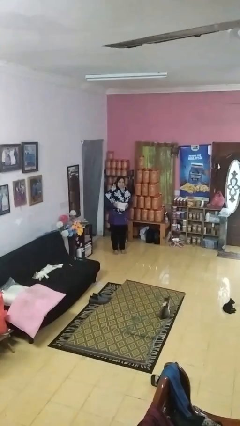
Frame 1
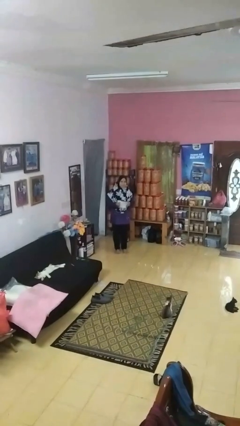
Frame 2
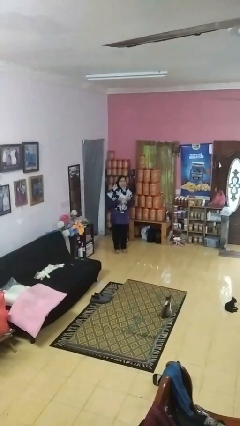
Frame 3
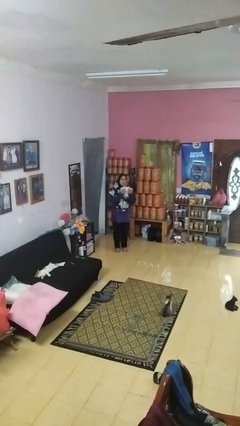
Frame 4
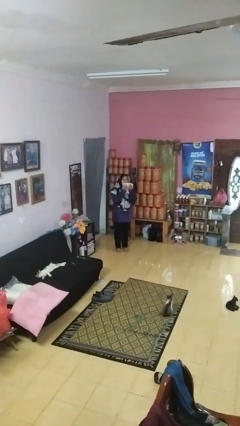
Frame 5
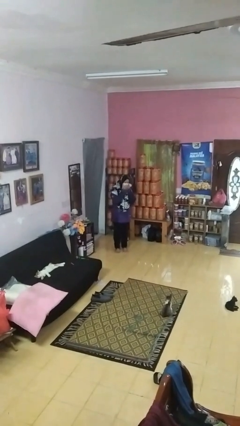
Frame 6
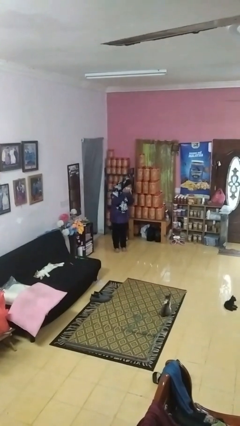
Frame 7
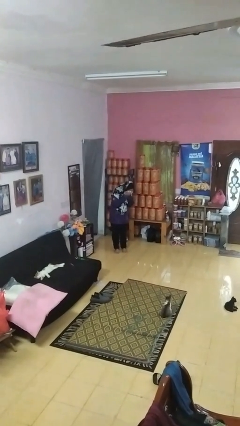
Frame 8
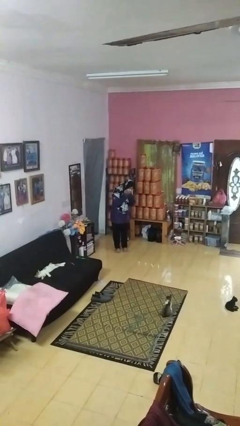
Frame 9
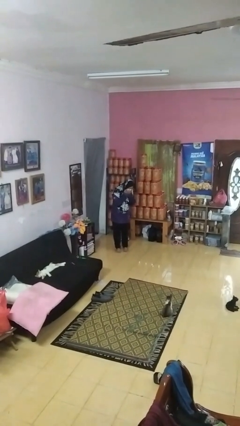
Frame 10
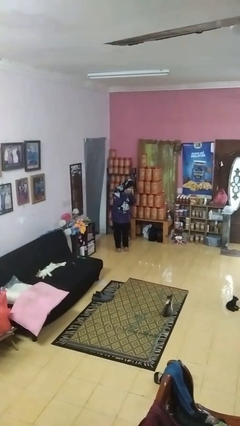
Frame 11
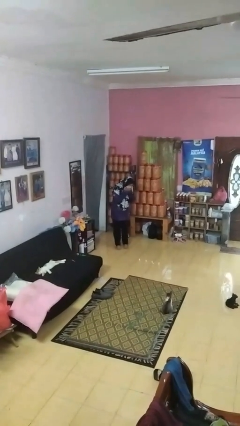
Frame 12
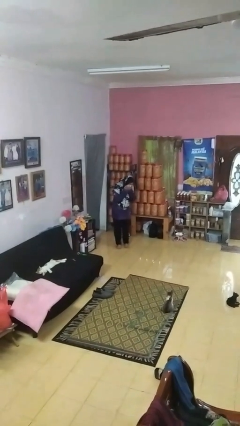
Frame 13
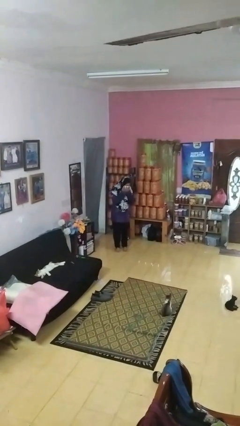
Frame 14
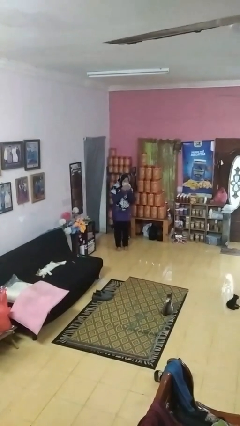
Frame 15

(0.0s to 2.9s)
person blows nose

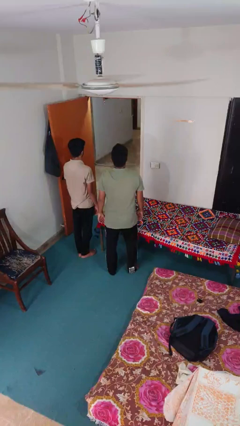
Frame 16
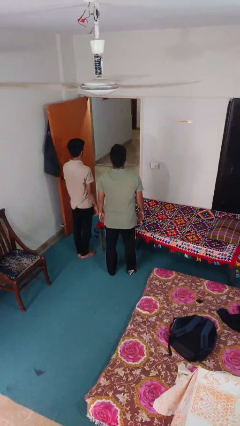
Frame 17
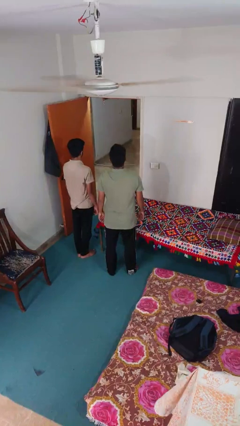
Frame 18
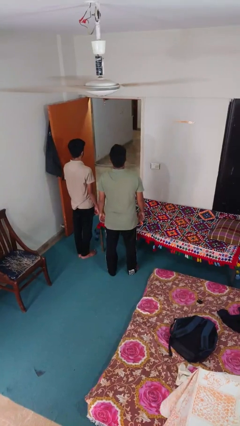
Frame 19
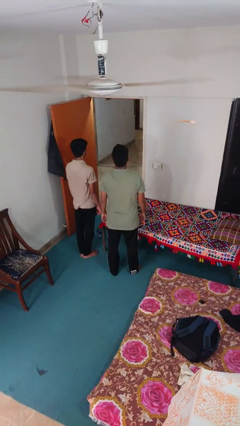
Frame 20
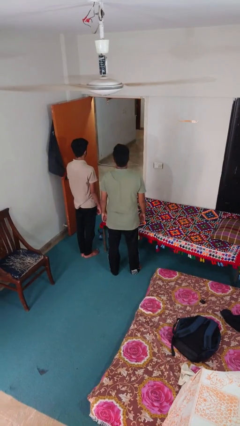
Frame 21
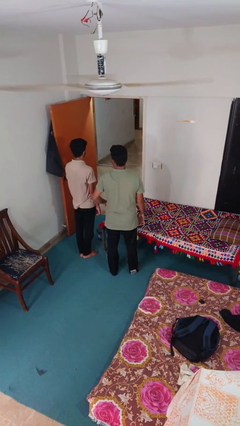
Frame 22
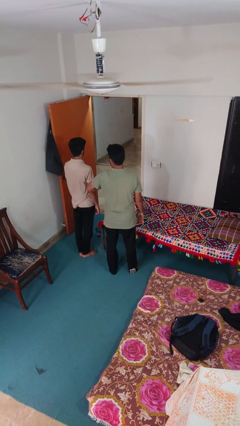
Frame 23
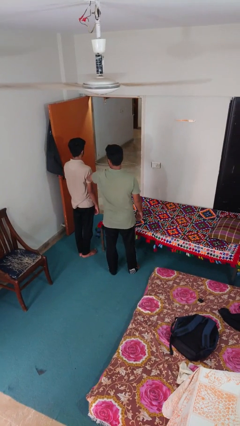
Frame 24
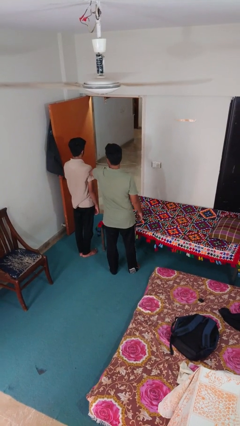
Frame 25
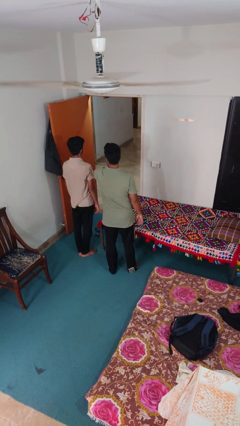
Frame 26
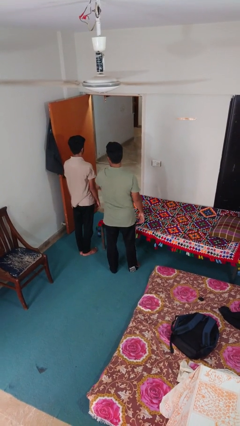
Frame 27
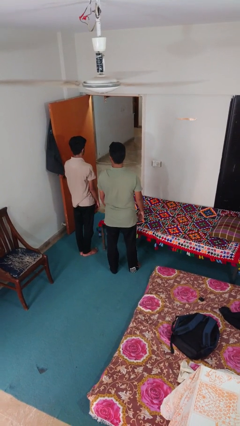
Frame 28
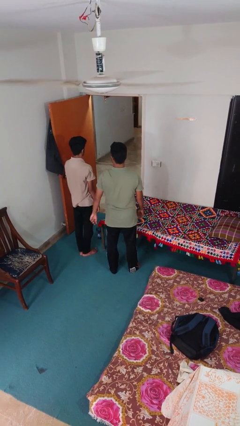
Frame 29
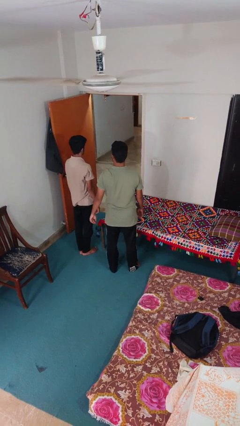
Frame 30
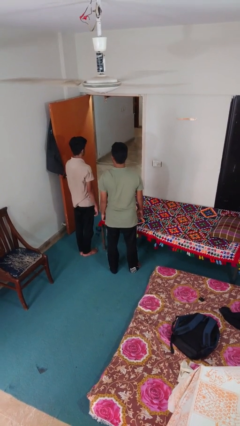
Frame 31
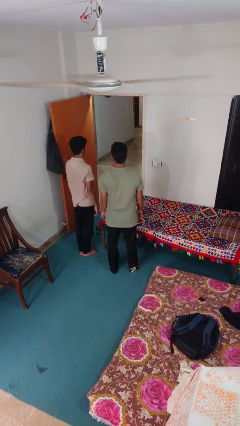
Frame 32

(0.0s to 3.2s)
person nudges person with elbow

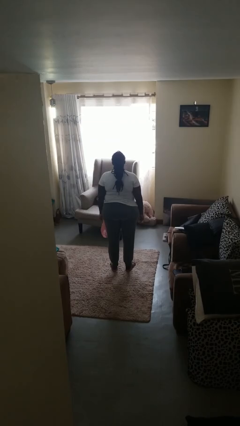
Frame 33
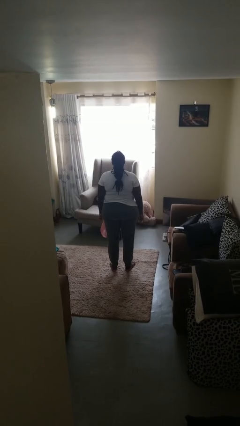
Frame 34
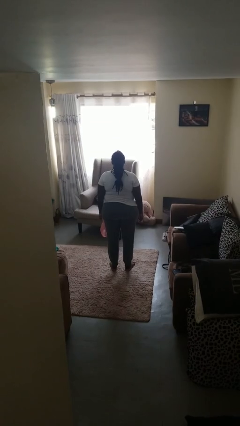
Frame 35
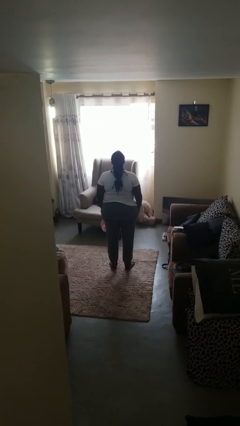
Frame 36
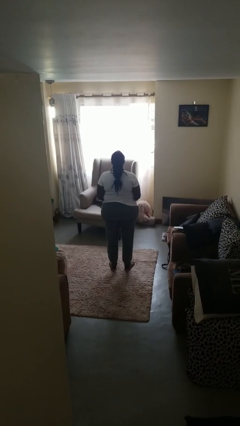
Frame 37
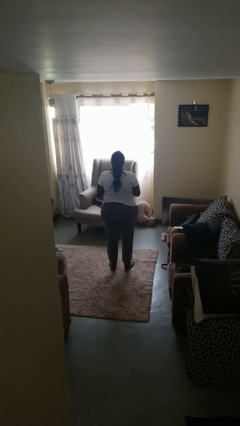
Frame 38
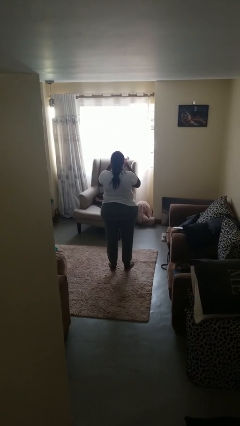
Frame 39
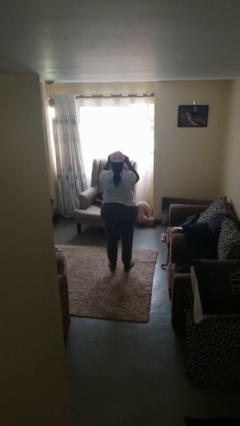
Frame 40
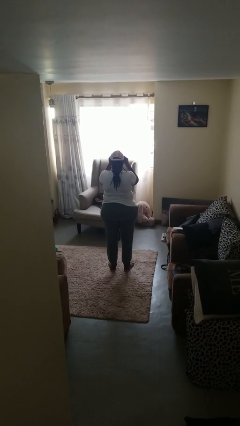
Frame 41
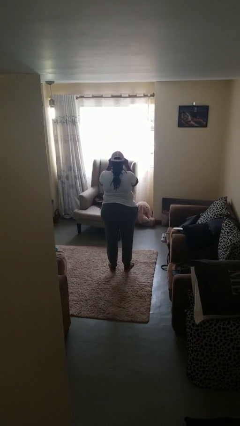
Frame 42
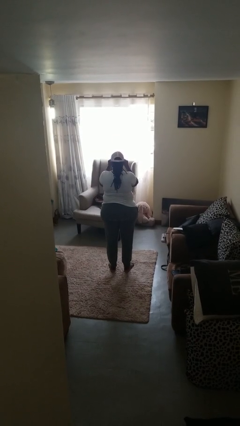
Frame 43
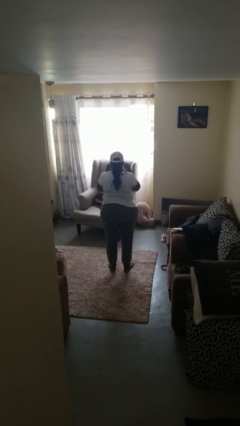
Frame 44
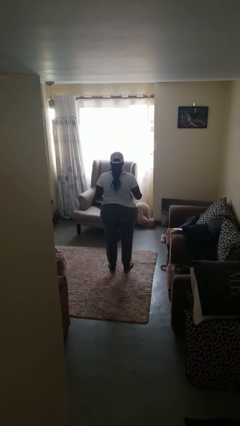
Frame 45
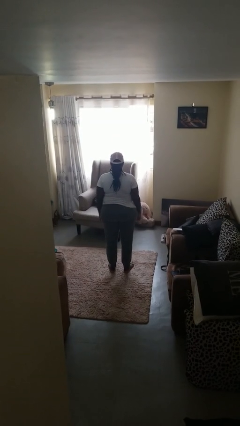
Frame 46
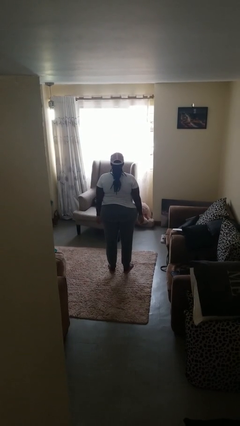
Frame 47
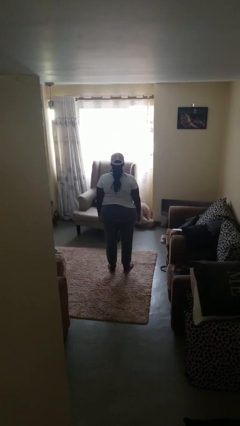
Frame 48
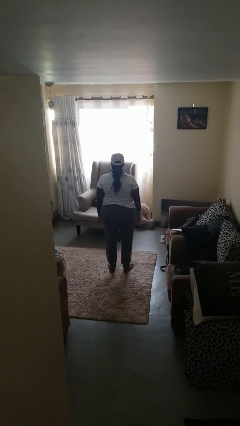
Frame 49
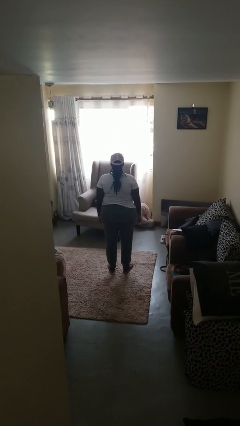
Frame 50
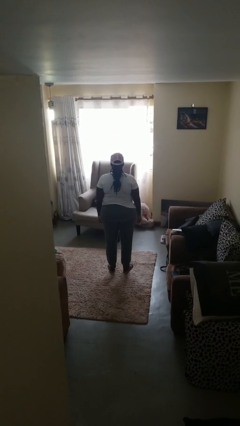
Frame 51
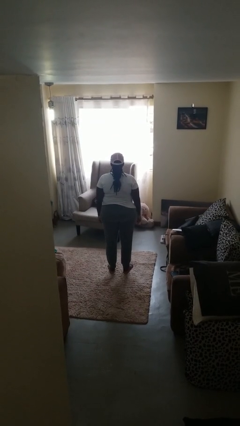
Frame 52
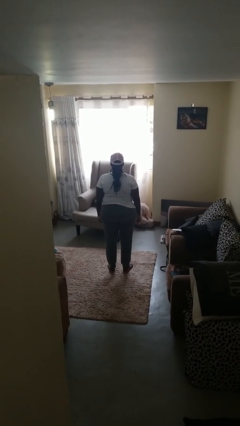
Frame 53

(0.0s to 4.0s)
person puts on hat

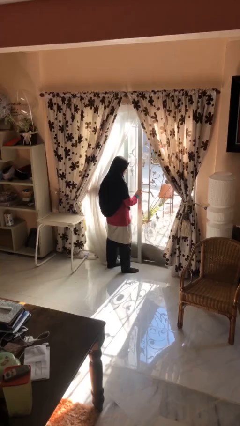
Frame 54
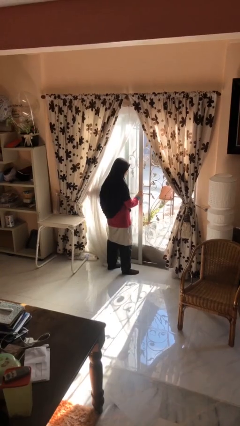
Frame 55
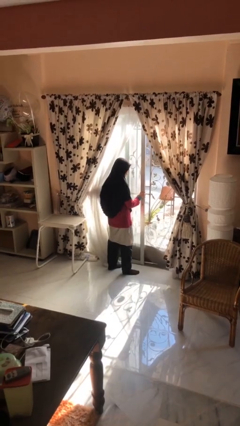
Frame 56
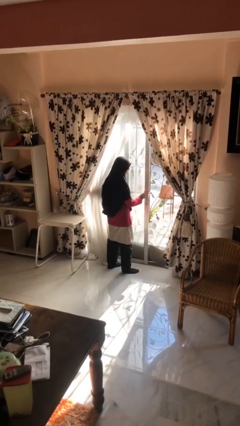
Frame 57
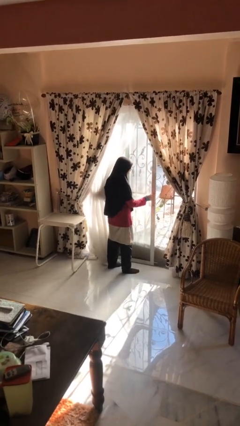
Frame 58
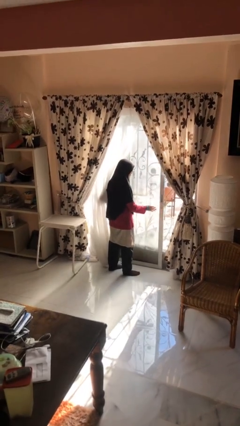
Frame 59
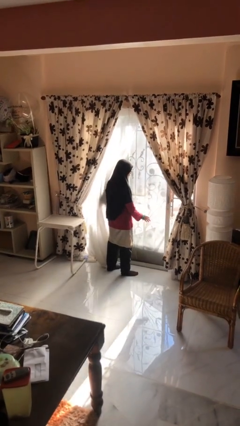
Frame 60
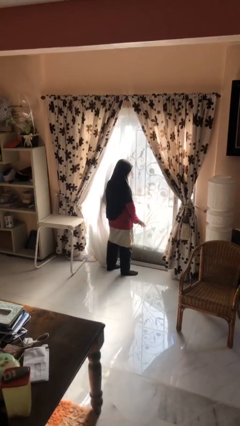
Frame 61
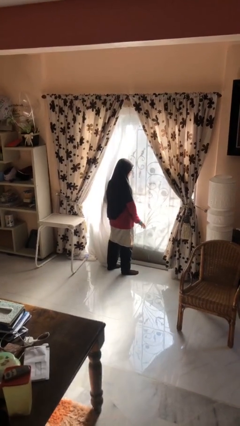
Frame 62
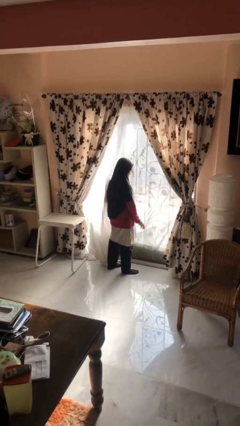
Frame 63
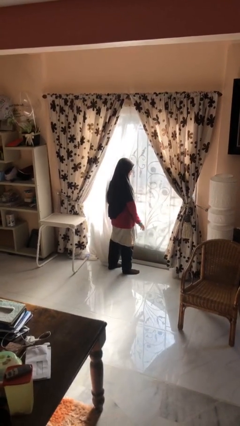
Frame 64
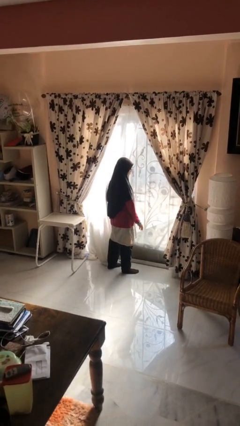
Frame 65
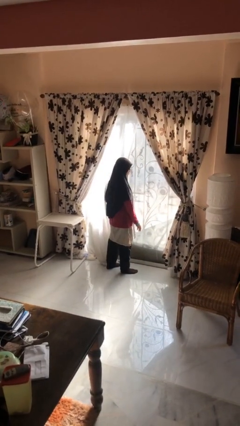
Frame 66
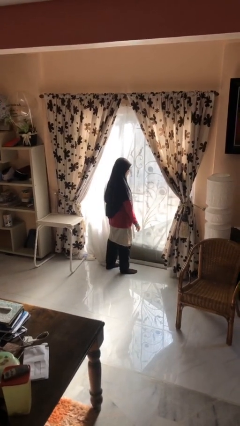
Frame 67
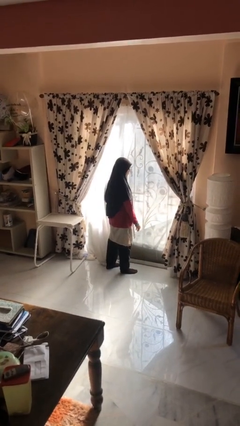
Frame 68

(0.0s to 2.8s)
person closes sliding door

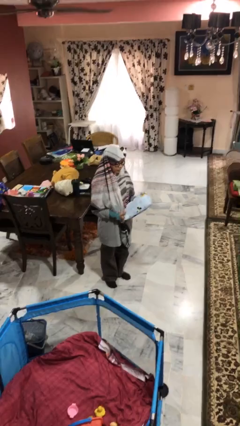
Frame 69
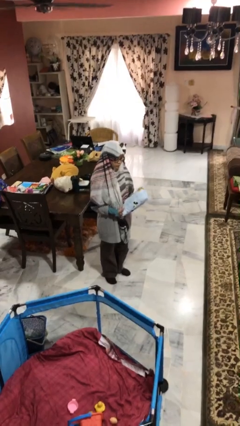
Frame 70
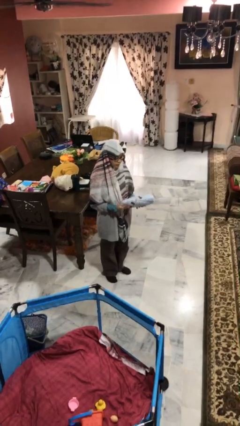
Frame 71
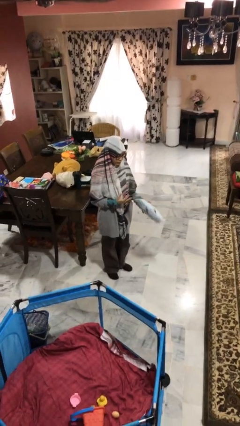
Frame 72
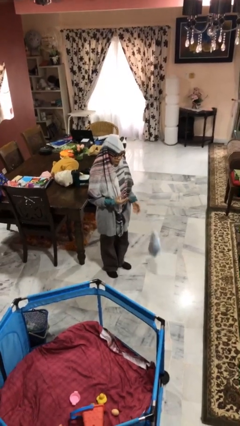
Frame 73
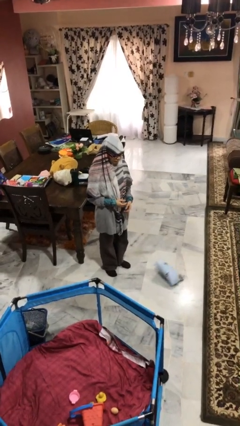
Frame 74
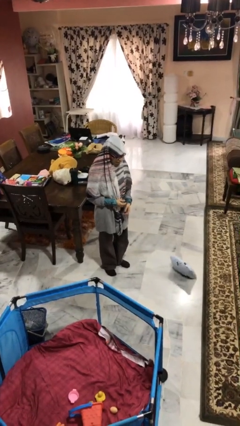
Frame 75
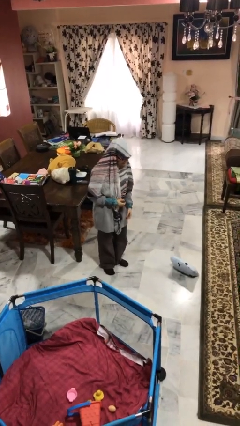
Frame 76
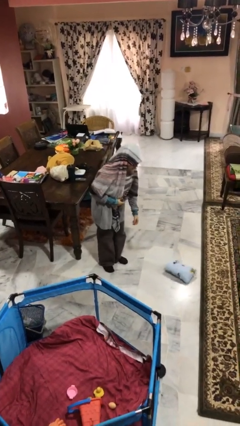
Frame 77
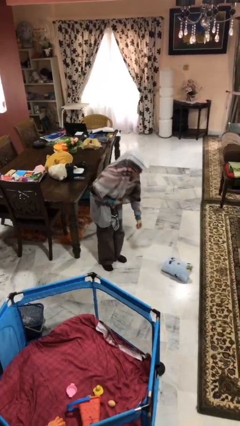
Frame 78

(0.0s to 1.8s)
person drops object

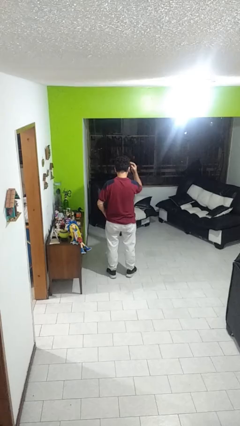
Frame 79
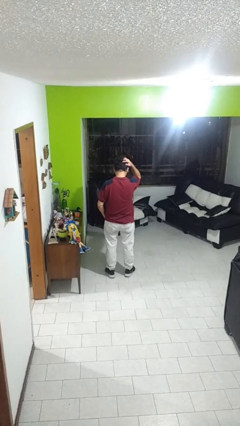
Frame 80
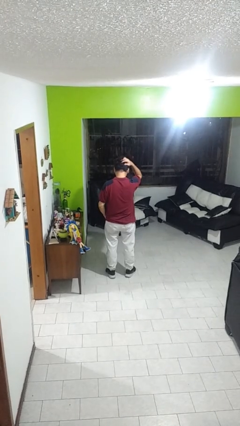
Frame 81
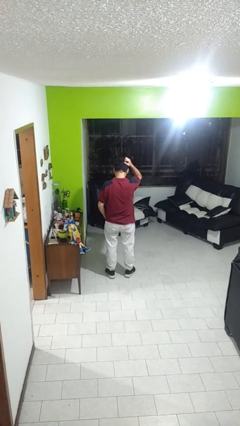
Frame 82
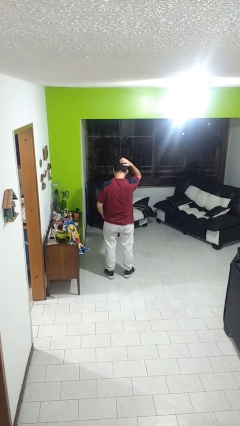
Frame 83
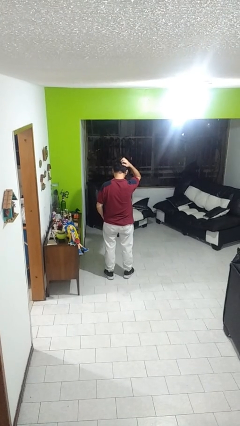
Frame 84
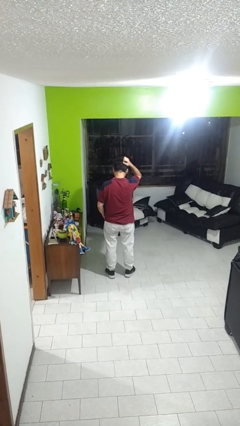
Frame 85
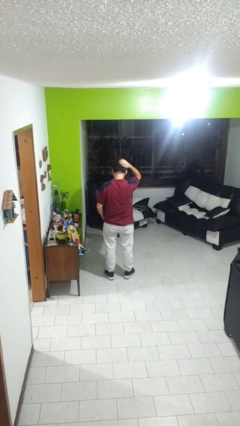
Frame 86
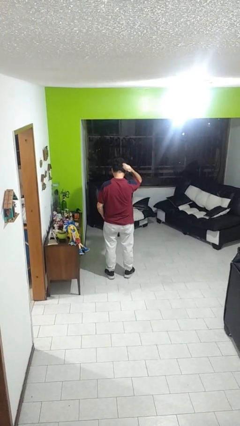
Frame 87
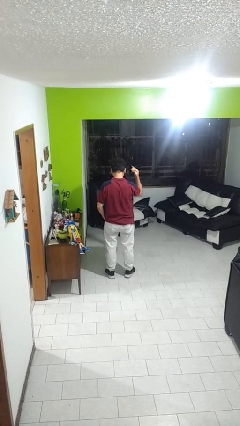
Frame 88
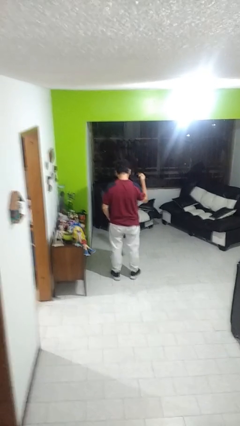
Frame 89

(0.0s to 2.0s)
person scratches face

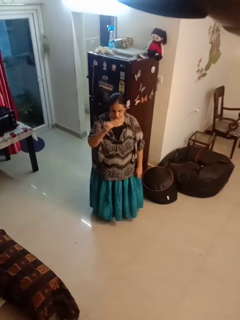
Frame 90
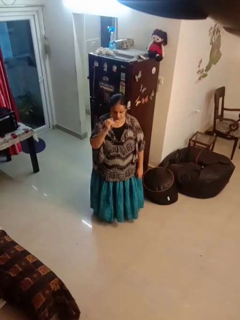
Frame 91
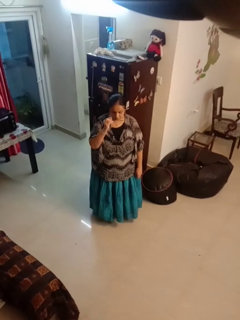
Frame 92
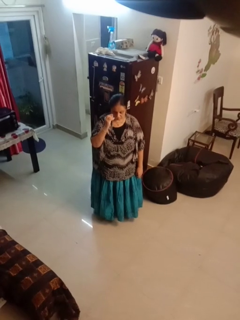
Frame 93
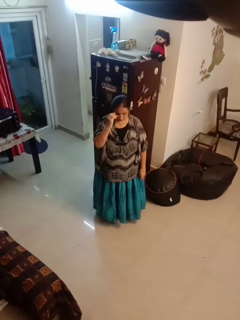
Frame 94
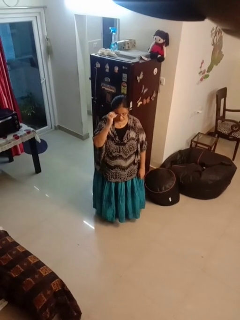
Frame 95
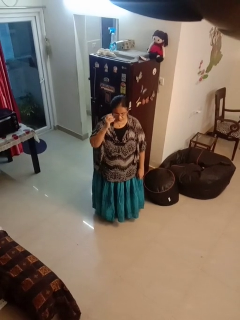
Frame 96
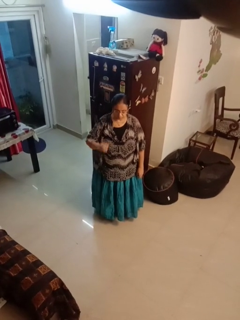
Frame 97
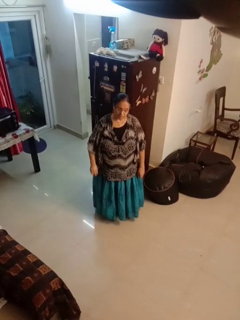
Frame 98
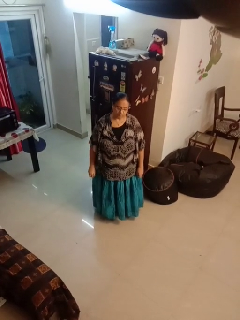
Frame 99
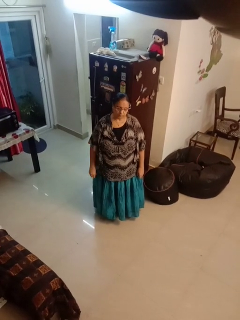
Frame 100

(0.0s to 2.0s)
person puts on glasses
